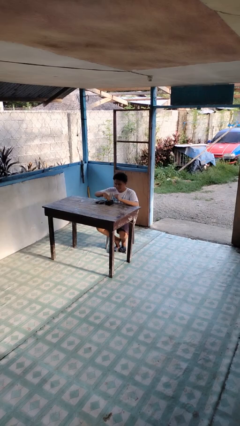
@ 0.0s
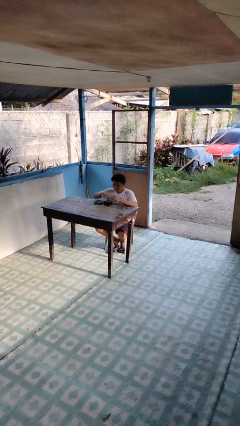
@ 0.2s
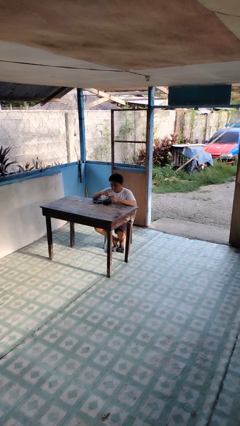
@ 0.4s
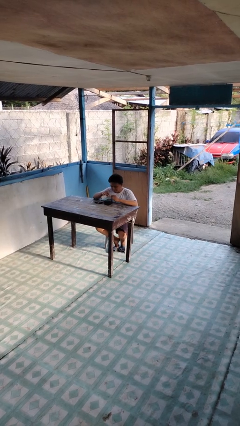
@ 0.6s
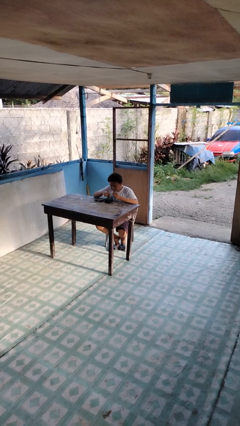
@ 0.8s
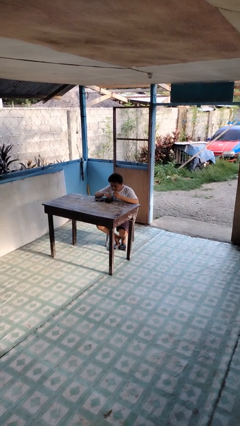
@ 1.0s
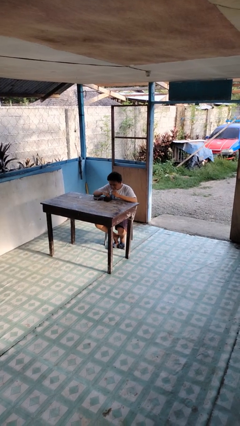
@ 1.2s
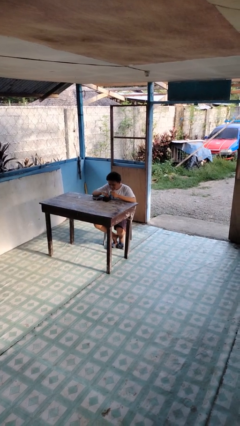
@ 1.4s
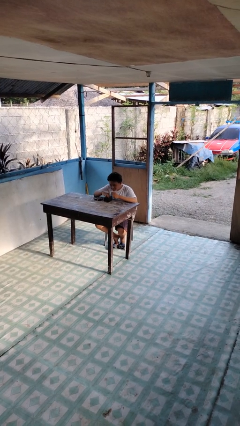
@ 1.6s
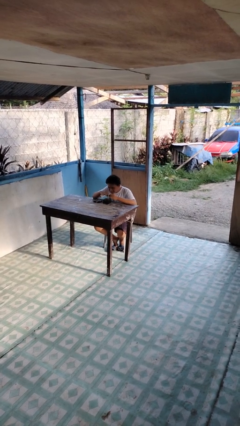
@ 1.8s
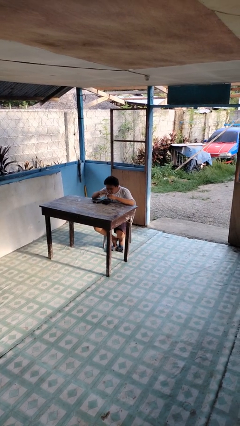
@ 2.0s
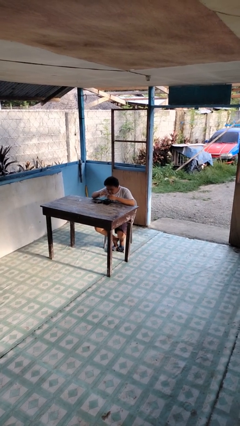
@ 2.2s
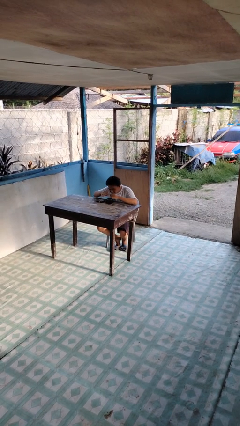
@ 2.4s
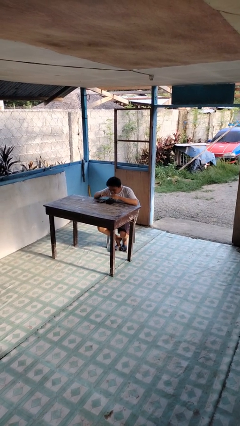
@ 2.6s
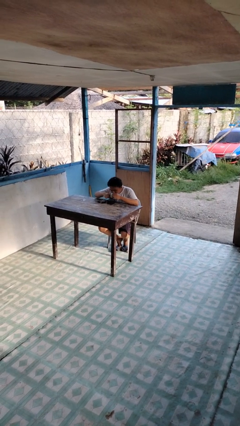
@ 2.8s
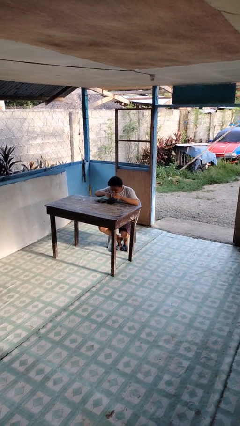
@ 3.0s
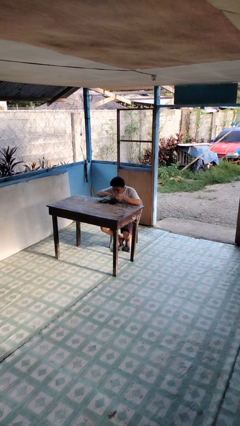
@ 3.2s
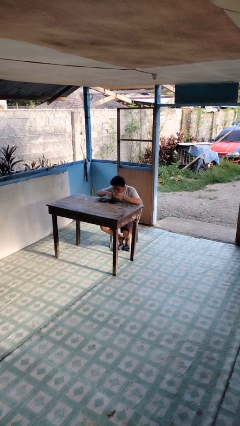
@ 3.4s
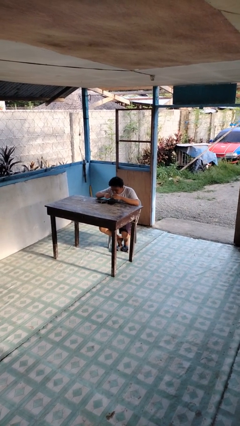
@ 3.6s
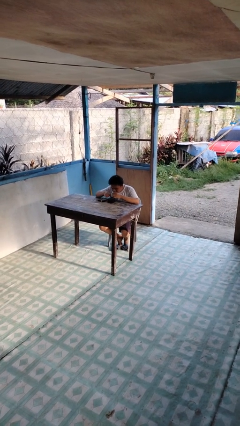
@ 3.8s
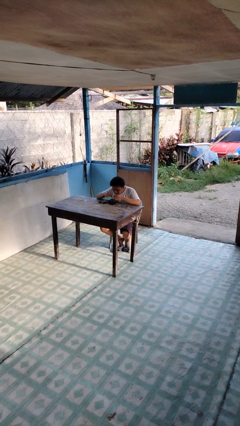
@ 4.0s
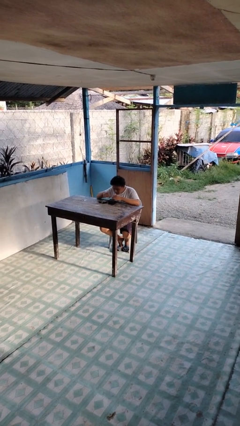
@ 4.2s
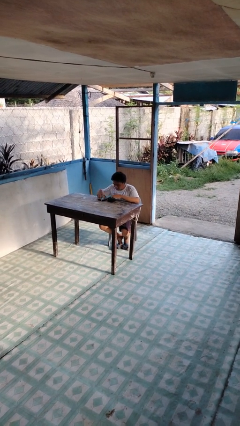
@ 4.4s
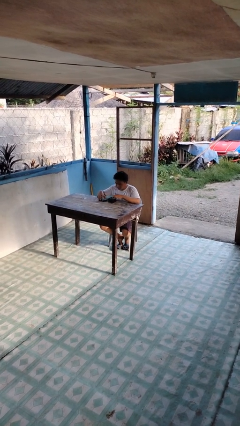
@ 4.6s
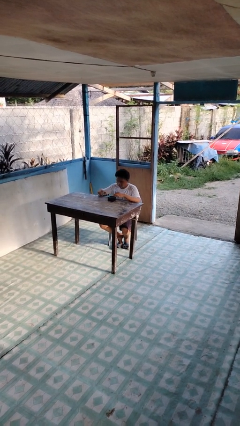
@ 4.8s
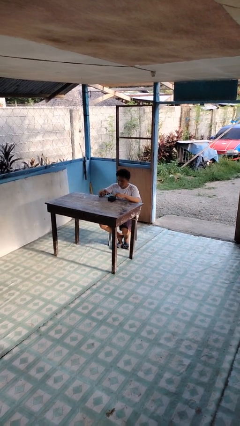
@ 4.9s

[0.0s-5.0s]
person searches jewelry box

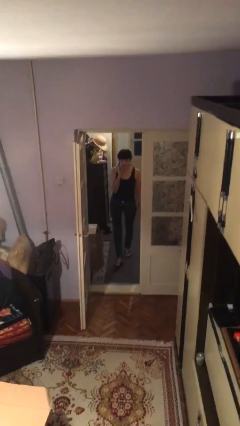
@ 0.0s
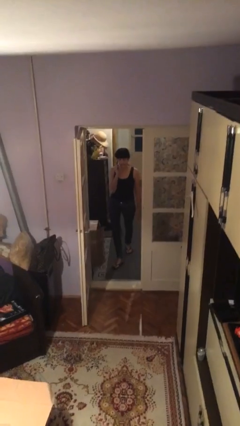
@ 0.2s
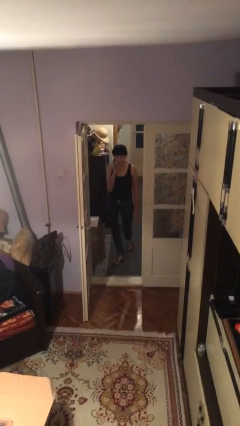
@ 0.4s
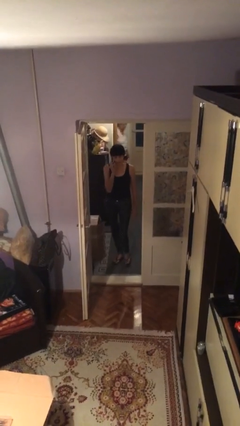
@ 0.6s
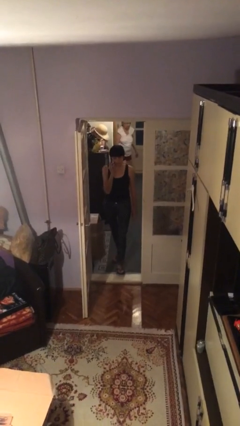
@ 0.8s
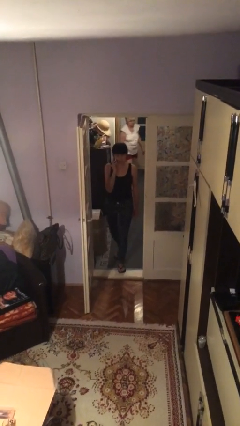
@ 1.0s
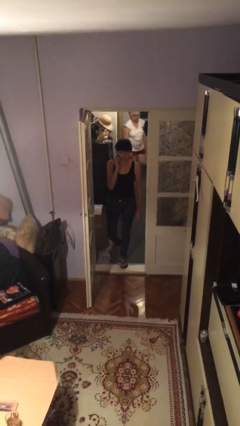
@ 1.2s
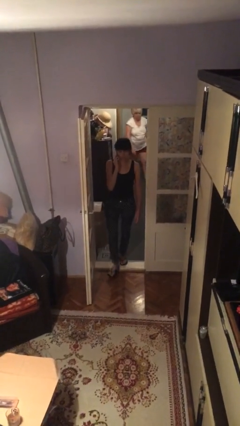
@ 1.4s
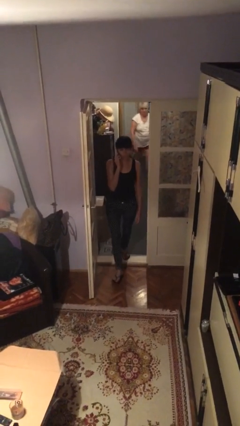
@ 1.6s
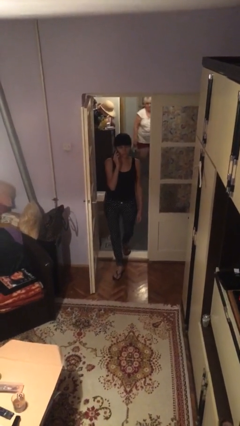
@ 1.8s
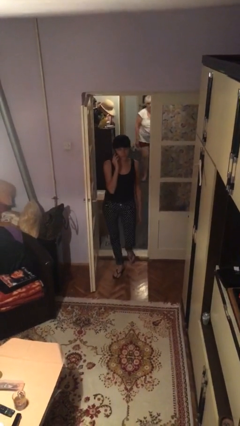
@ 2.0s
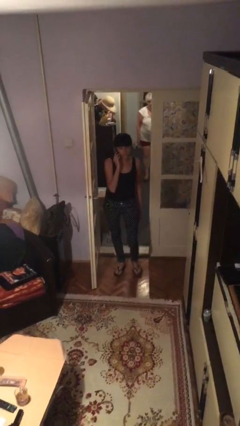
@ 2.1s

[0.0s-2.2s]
person enters scene through structure

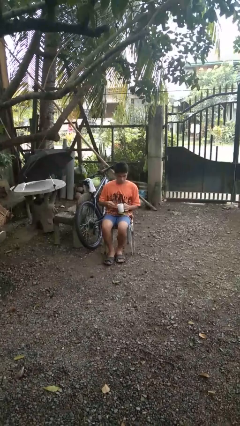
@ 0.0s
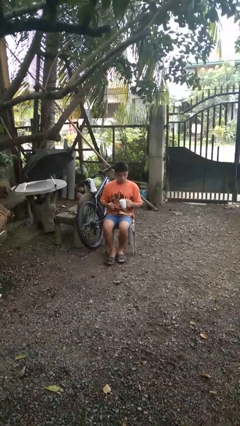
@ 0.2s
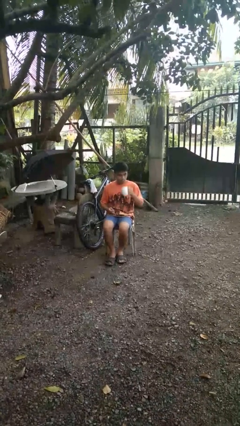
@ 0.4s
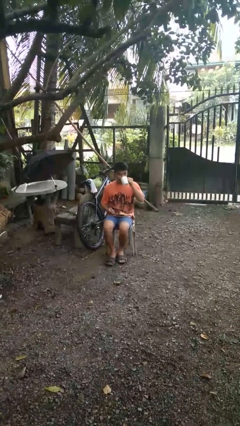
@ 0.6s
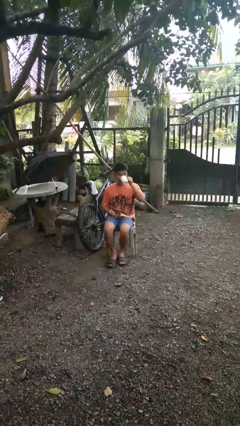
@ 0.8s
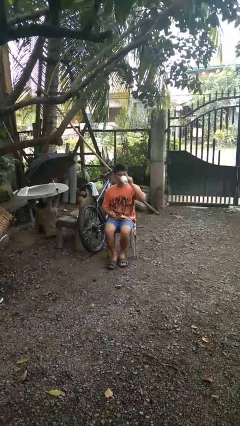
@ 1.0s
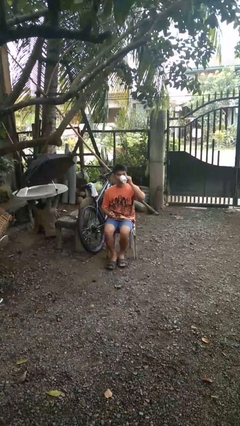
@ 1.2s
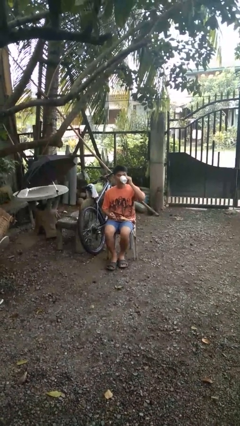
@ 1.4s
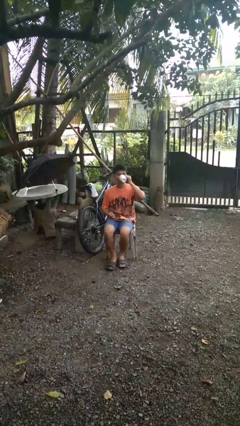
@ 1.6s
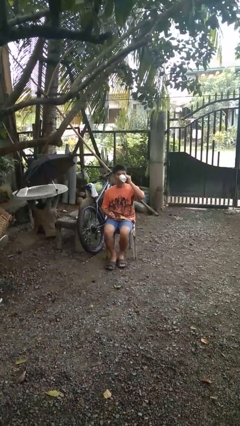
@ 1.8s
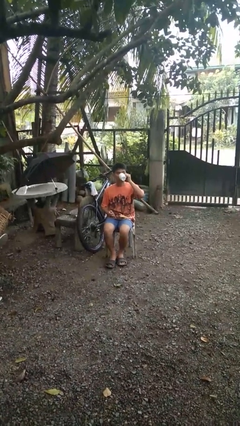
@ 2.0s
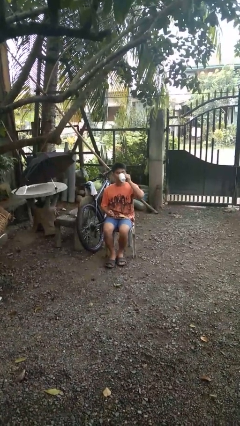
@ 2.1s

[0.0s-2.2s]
person drinks from mug

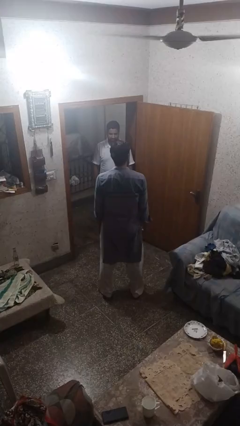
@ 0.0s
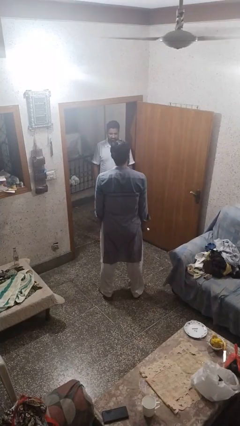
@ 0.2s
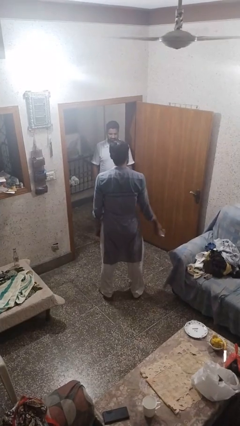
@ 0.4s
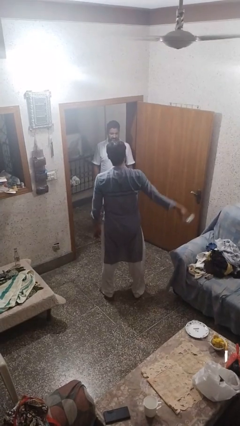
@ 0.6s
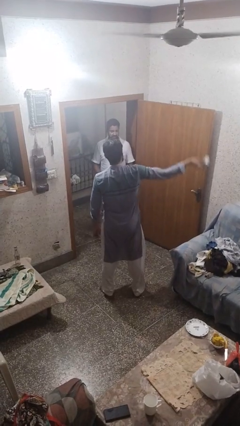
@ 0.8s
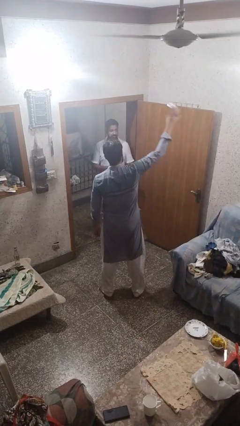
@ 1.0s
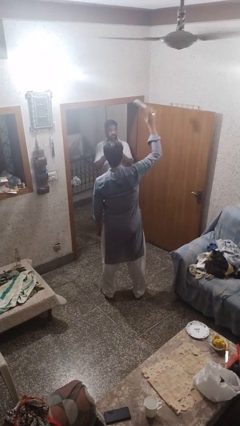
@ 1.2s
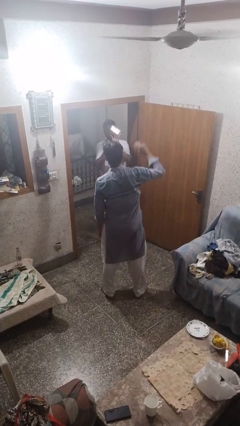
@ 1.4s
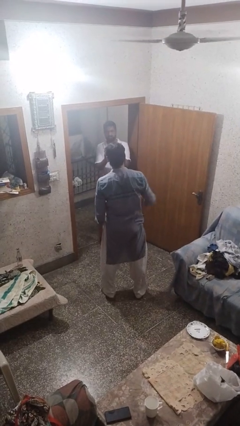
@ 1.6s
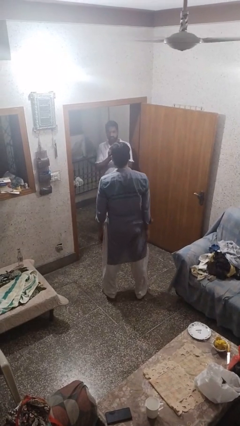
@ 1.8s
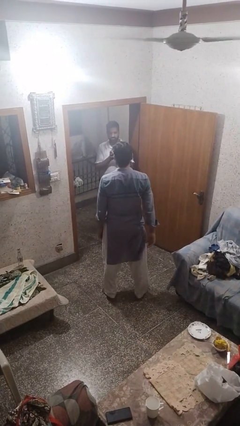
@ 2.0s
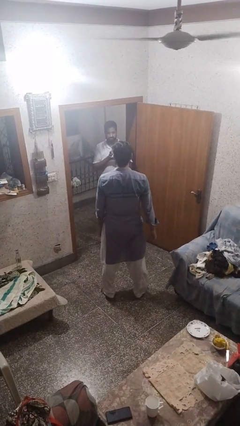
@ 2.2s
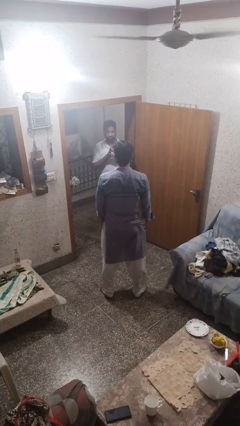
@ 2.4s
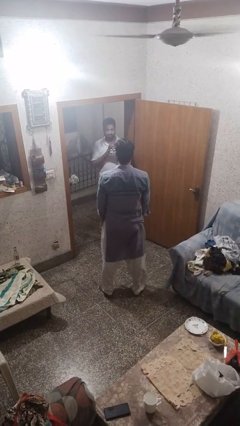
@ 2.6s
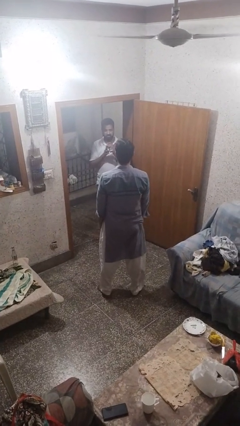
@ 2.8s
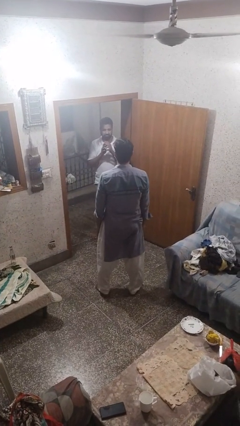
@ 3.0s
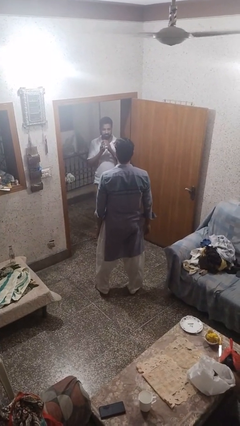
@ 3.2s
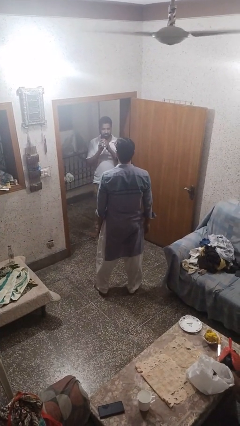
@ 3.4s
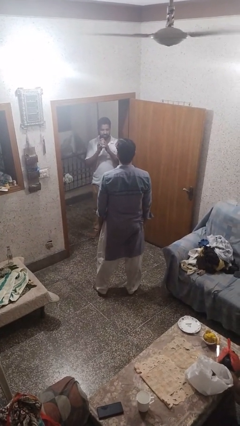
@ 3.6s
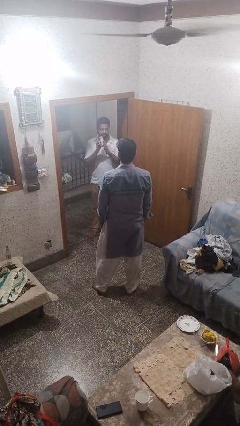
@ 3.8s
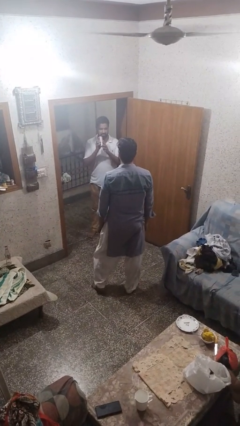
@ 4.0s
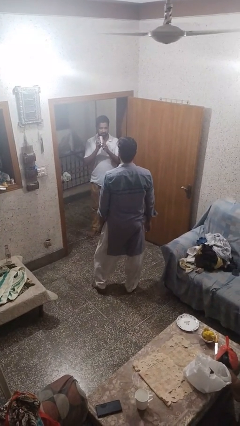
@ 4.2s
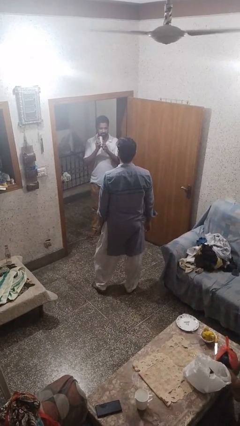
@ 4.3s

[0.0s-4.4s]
person throws object to person

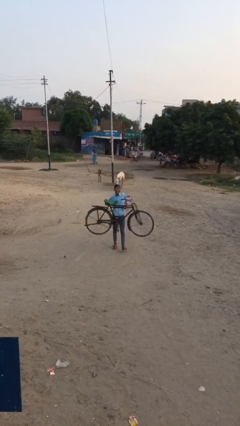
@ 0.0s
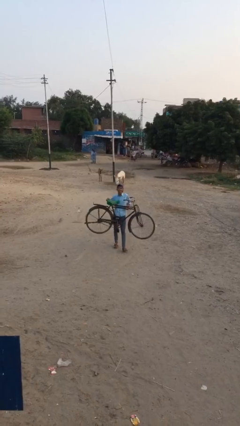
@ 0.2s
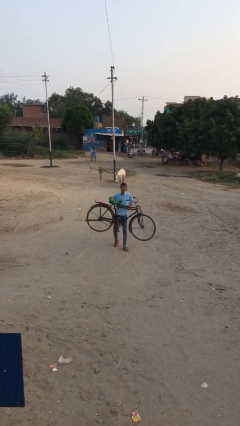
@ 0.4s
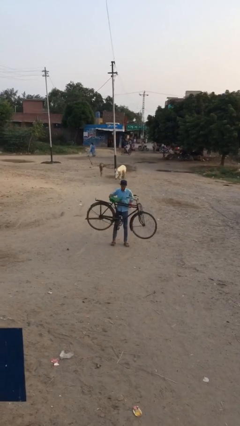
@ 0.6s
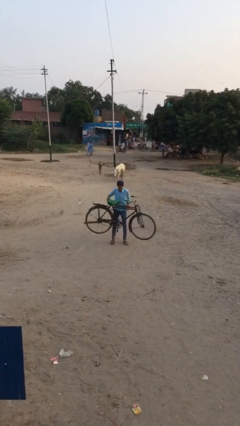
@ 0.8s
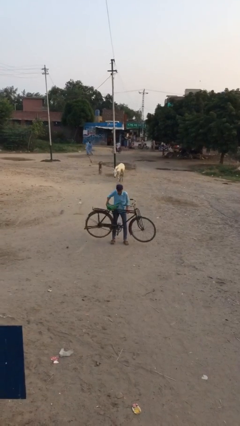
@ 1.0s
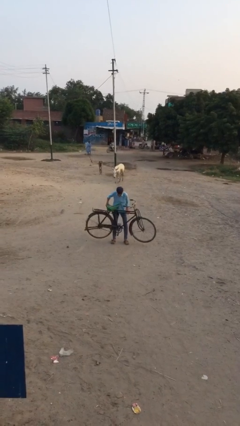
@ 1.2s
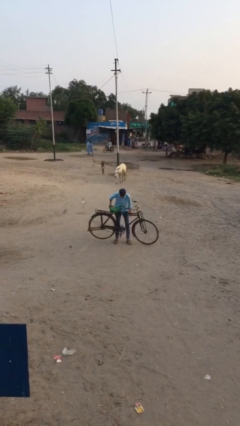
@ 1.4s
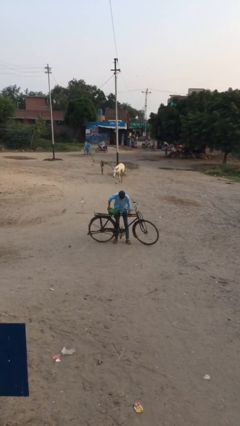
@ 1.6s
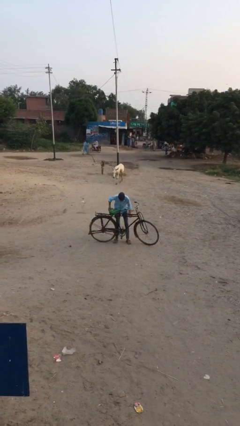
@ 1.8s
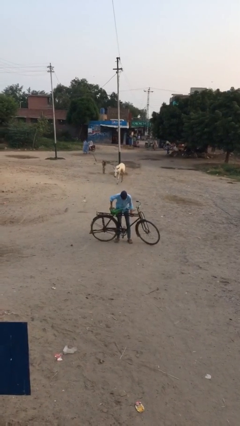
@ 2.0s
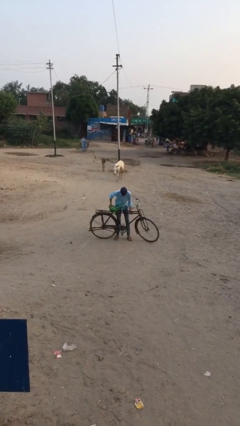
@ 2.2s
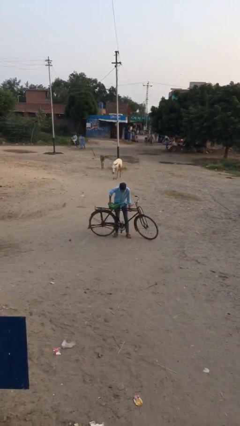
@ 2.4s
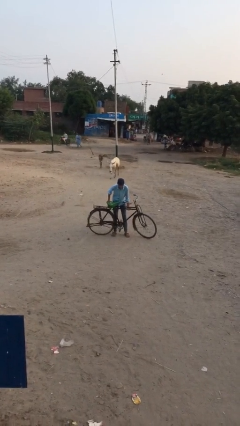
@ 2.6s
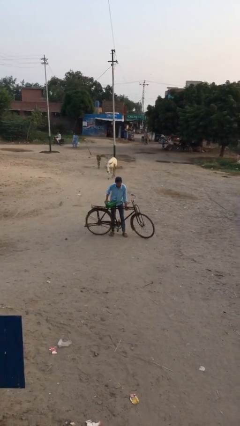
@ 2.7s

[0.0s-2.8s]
person puts down object on floor

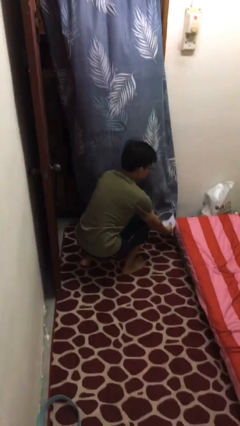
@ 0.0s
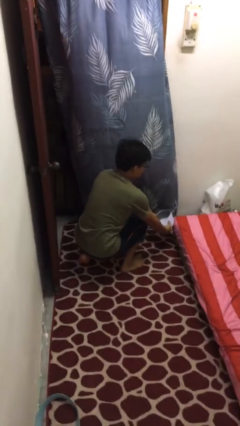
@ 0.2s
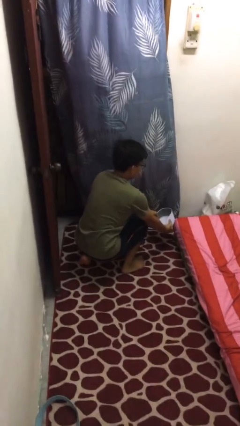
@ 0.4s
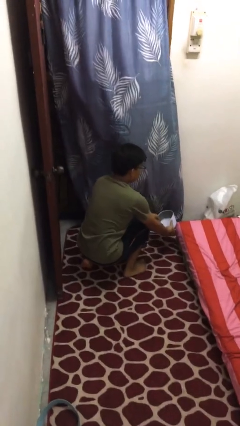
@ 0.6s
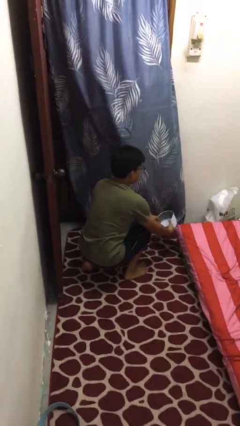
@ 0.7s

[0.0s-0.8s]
person catches dropped object

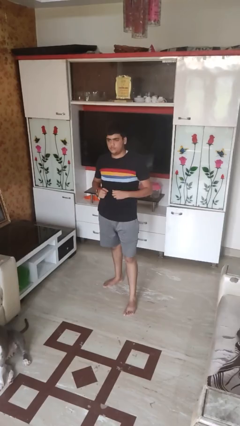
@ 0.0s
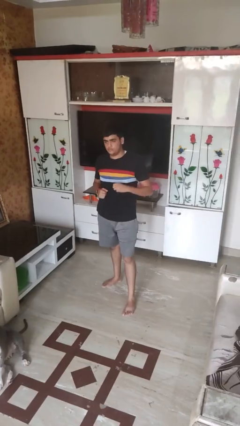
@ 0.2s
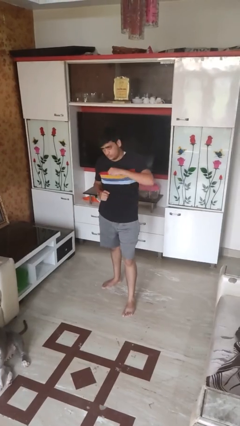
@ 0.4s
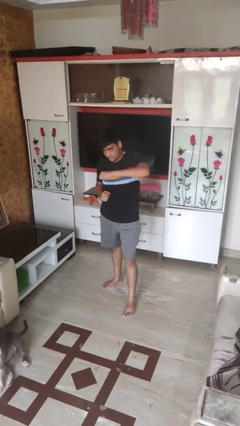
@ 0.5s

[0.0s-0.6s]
person punches
